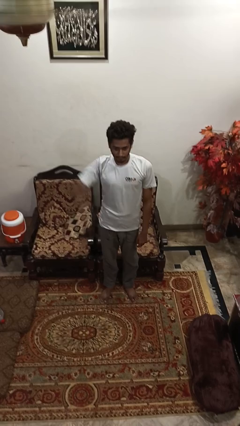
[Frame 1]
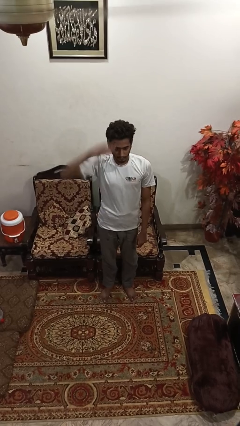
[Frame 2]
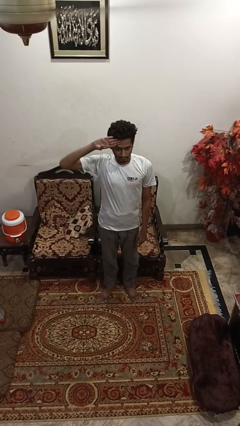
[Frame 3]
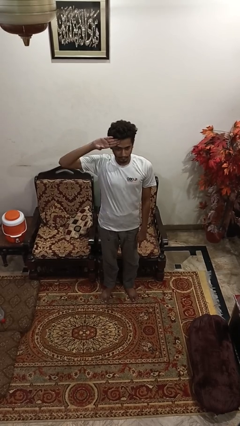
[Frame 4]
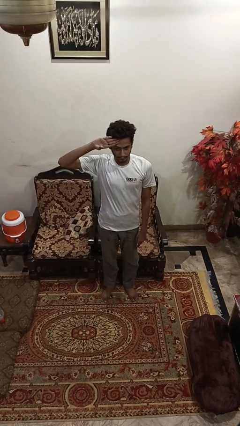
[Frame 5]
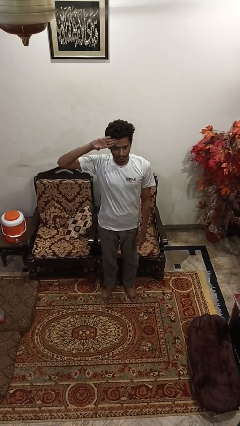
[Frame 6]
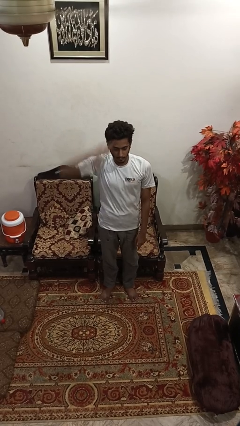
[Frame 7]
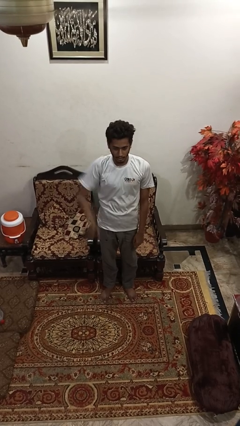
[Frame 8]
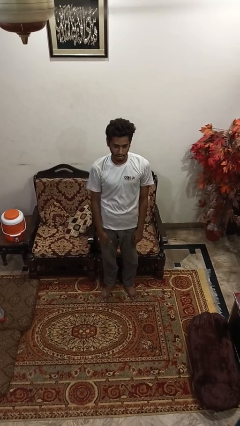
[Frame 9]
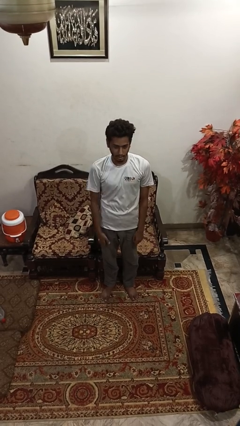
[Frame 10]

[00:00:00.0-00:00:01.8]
person salutes

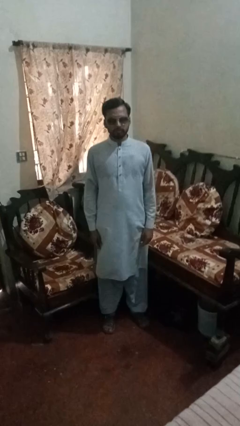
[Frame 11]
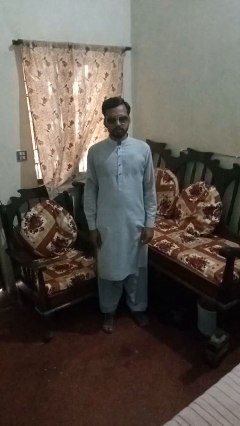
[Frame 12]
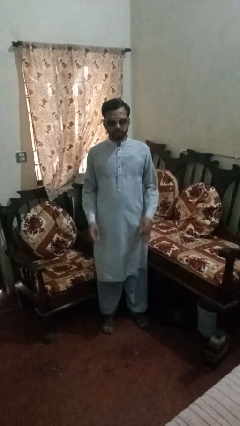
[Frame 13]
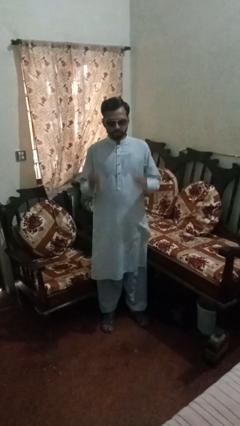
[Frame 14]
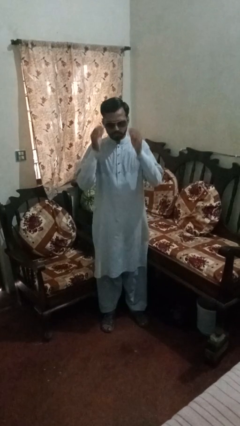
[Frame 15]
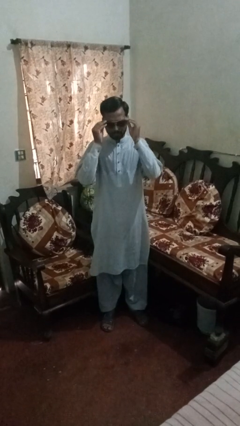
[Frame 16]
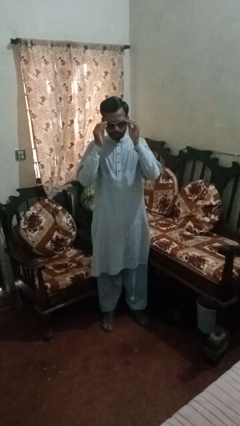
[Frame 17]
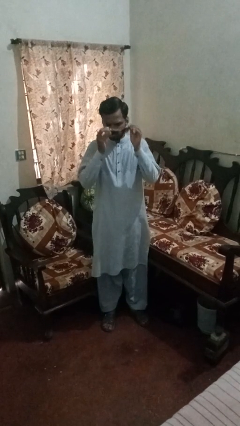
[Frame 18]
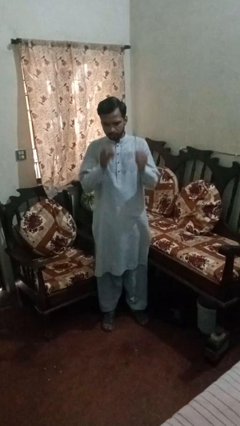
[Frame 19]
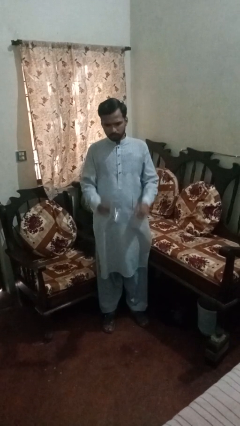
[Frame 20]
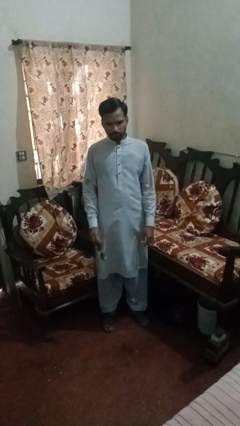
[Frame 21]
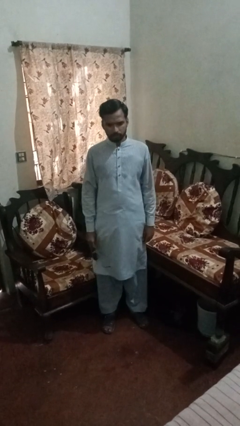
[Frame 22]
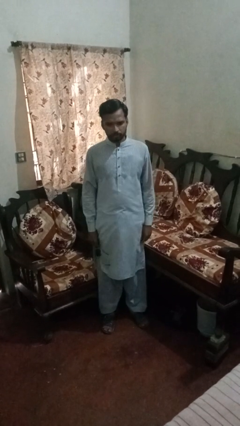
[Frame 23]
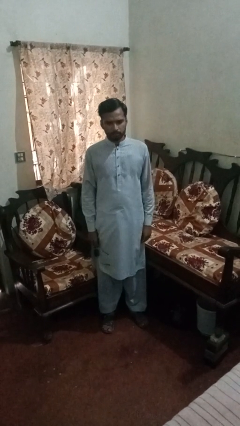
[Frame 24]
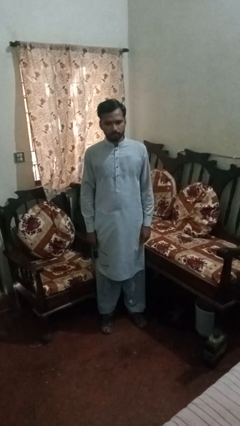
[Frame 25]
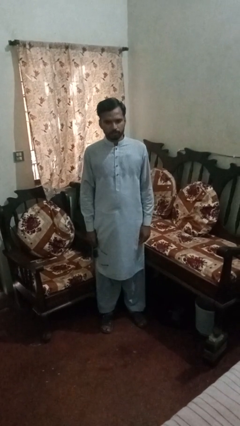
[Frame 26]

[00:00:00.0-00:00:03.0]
person takes off sunglasses

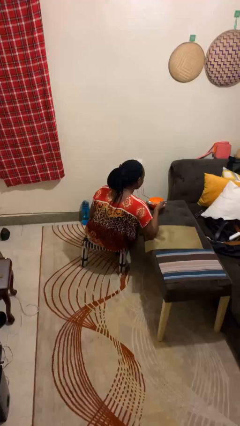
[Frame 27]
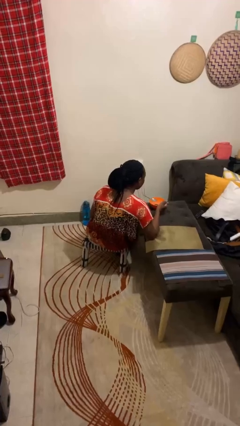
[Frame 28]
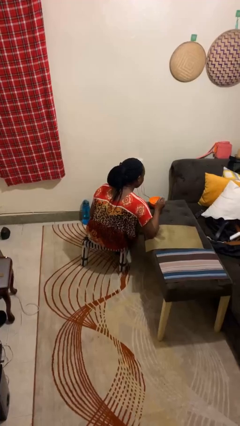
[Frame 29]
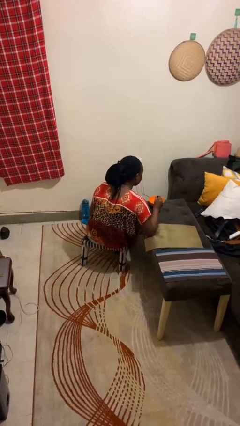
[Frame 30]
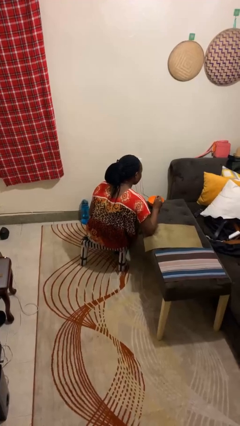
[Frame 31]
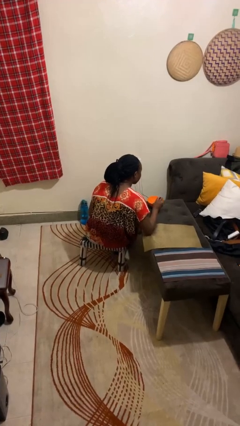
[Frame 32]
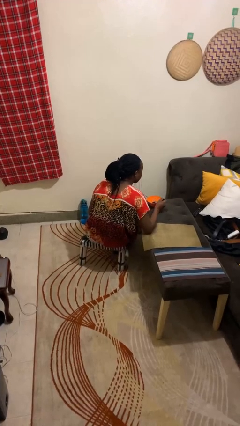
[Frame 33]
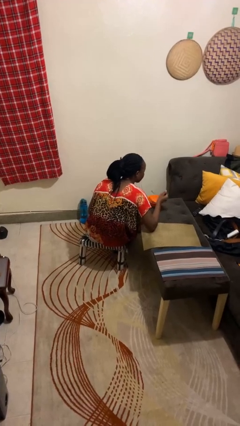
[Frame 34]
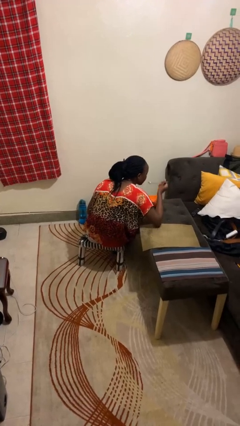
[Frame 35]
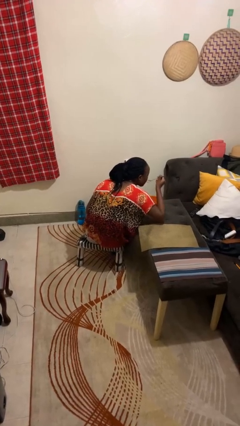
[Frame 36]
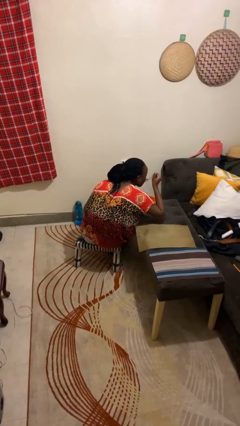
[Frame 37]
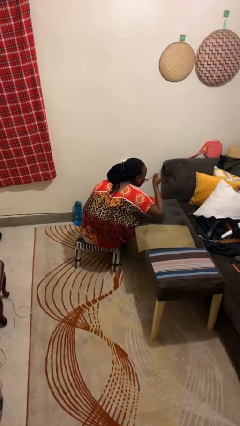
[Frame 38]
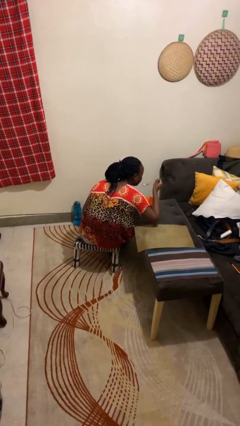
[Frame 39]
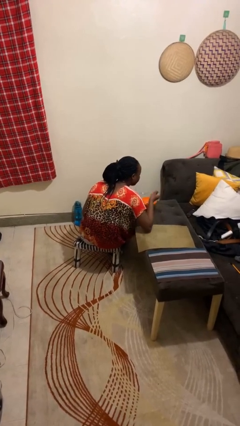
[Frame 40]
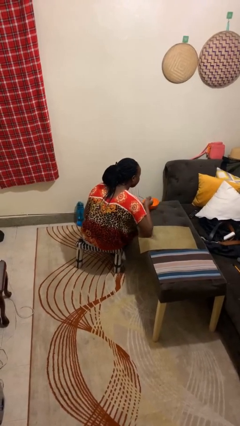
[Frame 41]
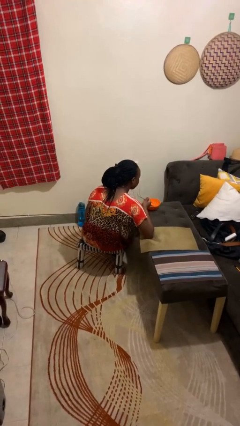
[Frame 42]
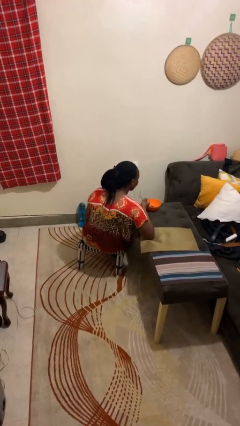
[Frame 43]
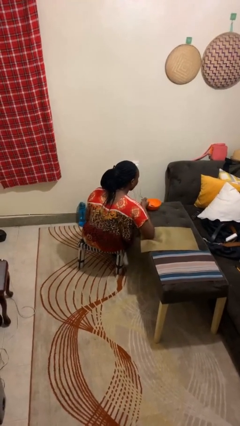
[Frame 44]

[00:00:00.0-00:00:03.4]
person eats with utensil

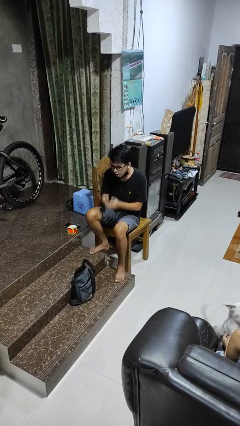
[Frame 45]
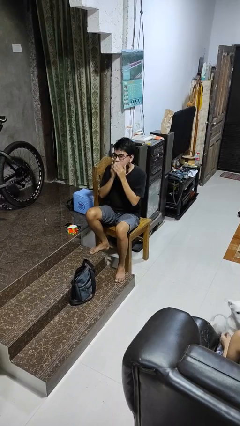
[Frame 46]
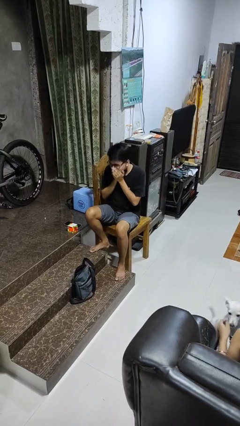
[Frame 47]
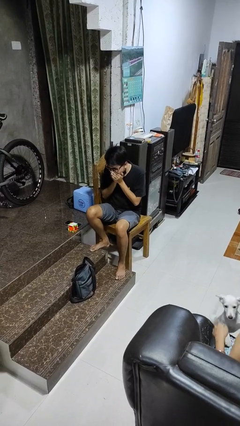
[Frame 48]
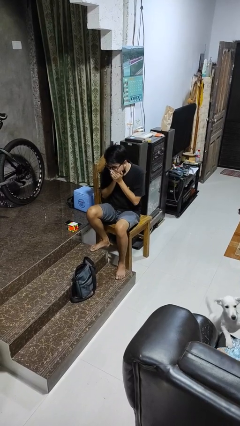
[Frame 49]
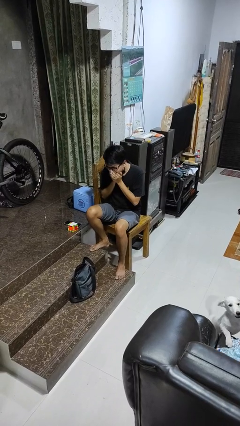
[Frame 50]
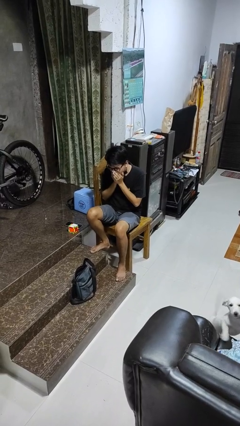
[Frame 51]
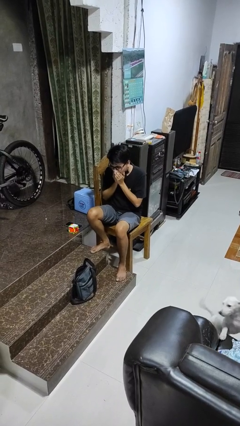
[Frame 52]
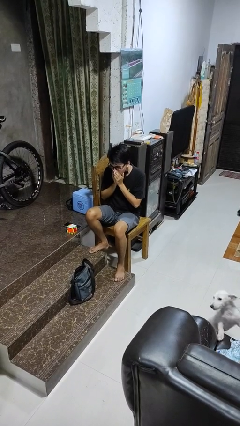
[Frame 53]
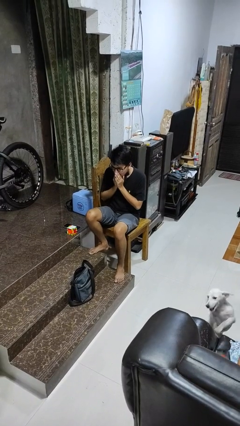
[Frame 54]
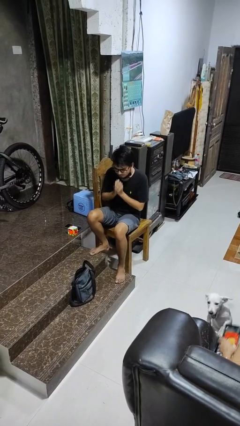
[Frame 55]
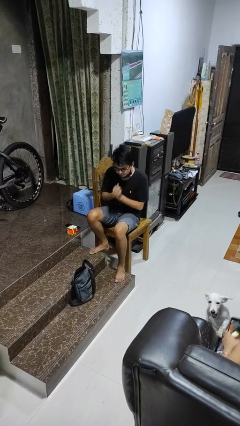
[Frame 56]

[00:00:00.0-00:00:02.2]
person sneezes into hand

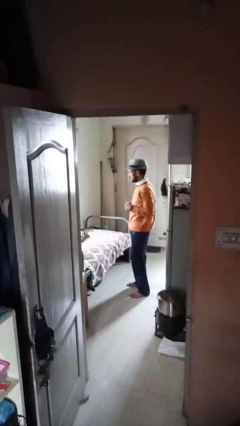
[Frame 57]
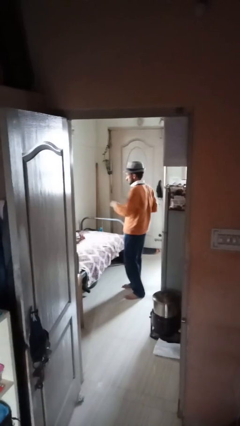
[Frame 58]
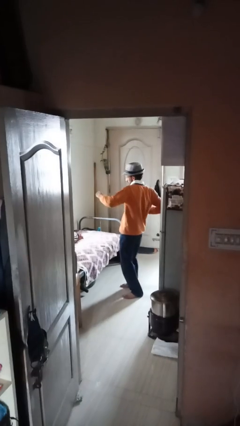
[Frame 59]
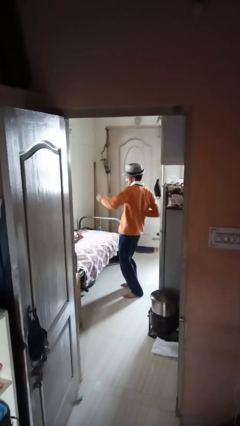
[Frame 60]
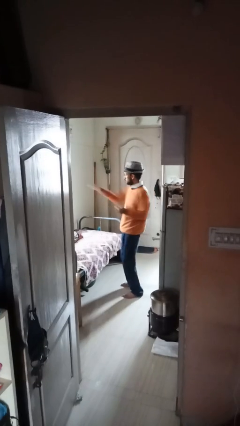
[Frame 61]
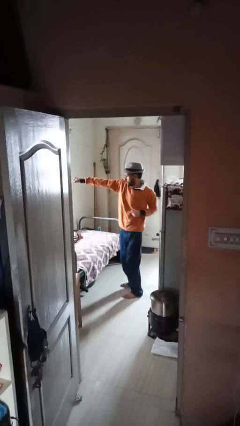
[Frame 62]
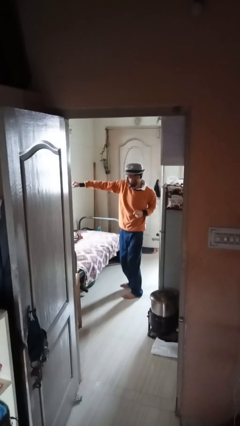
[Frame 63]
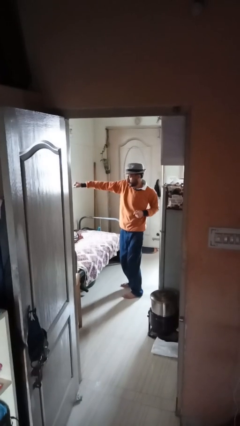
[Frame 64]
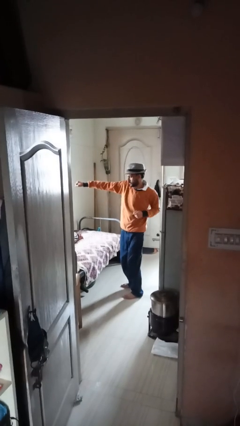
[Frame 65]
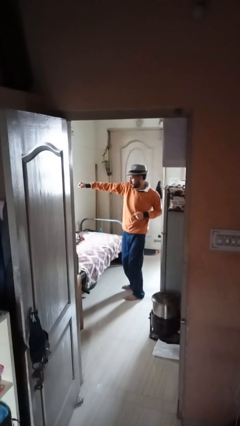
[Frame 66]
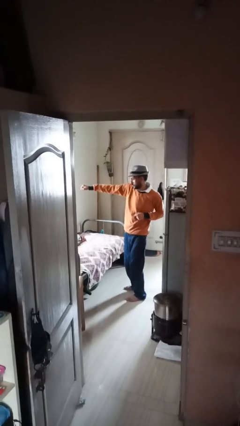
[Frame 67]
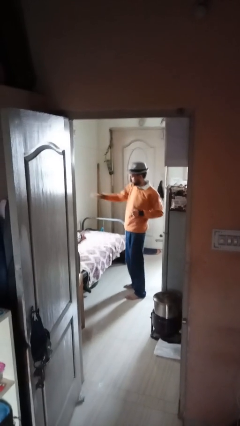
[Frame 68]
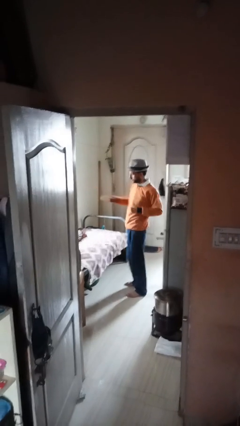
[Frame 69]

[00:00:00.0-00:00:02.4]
person punches

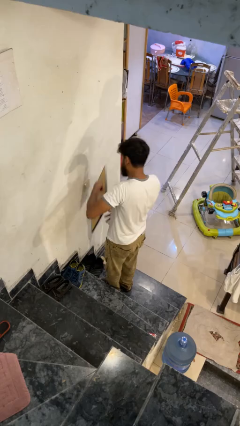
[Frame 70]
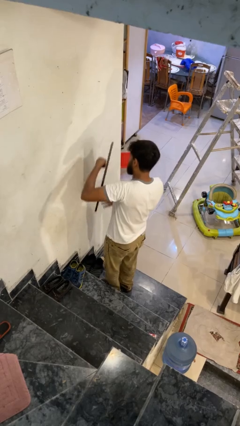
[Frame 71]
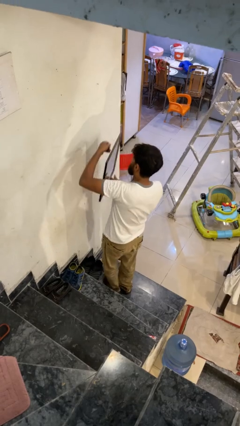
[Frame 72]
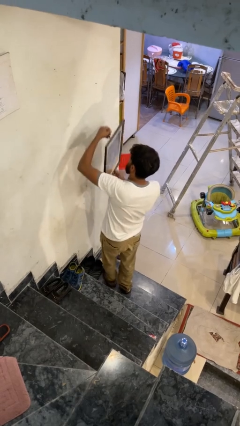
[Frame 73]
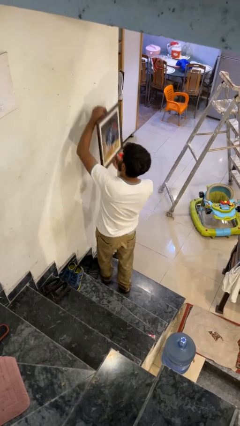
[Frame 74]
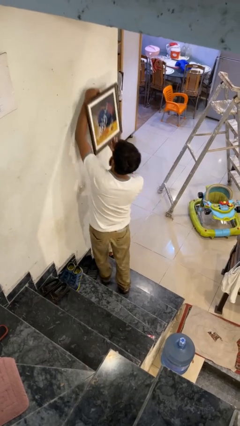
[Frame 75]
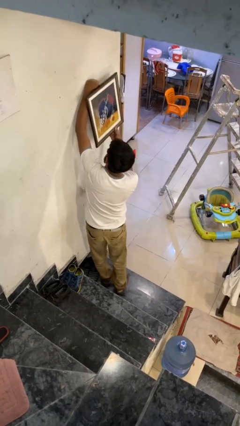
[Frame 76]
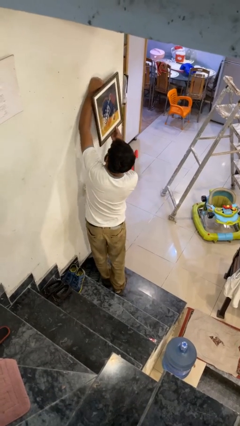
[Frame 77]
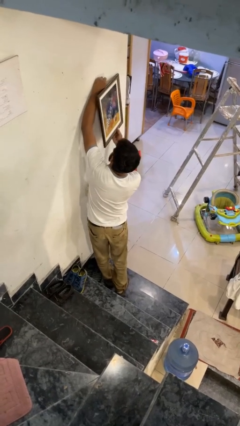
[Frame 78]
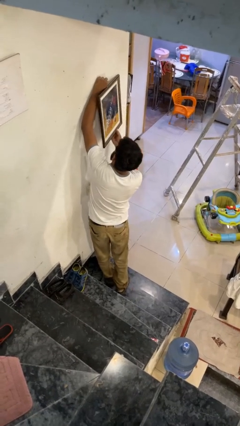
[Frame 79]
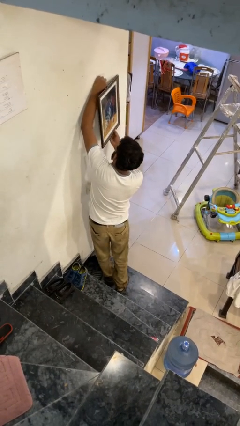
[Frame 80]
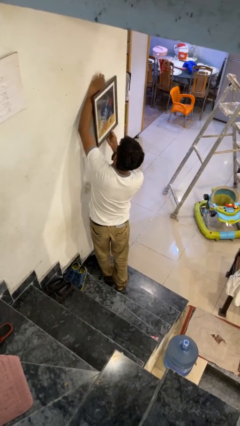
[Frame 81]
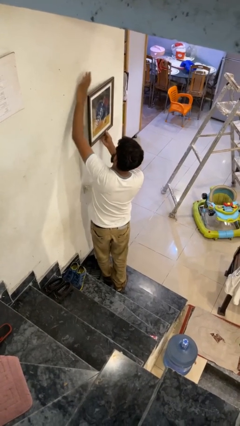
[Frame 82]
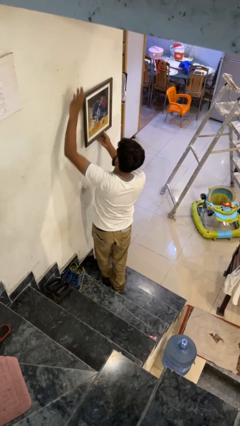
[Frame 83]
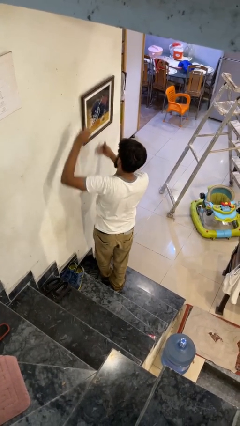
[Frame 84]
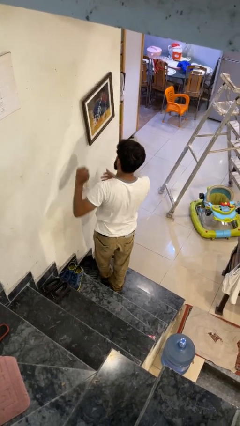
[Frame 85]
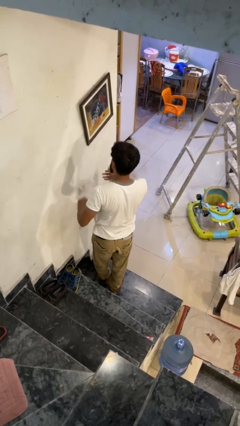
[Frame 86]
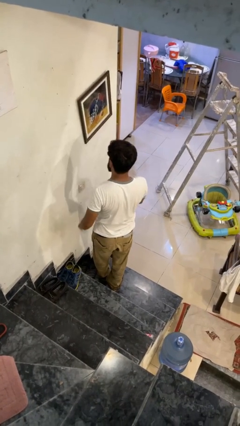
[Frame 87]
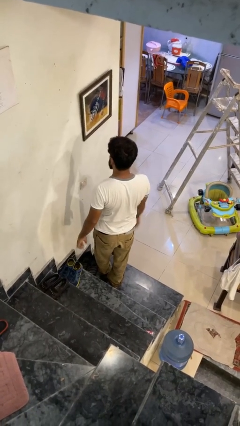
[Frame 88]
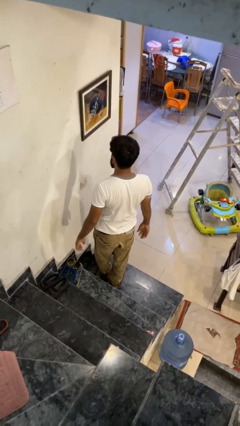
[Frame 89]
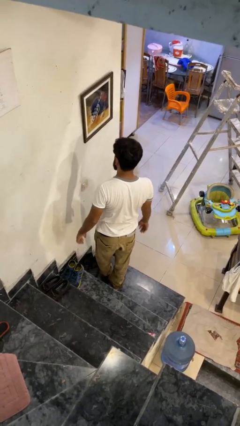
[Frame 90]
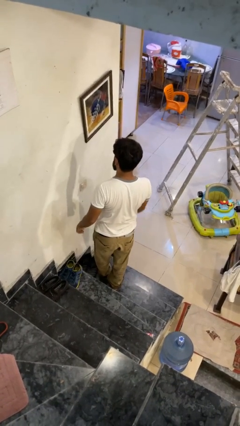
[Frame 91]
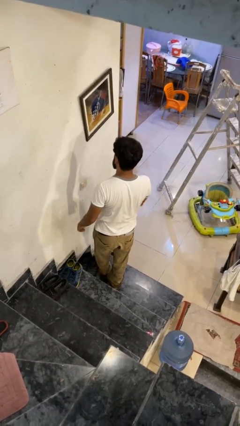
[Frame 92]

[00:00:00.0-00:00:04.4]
person puts up picture frame
